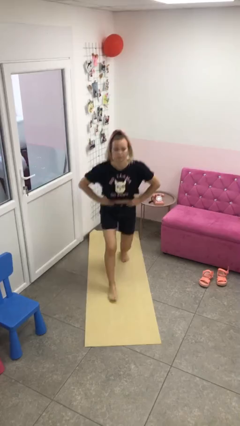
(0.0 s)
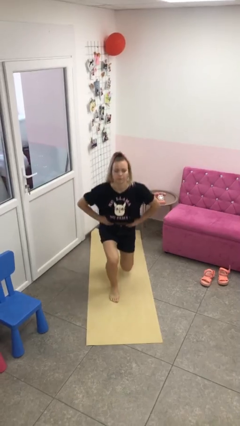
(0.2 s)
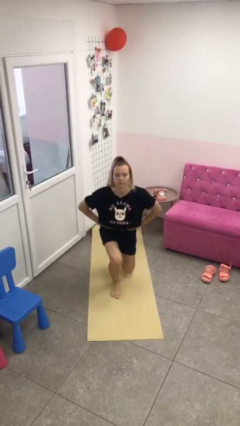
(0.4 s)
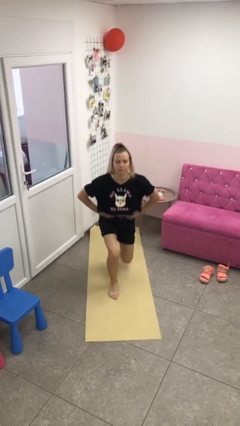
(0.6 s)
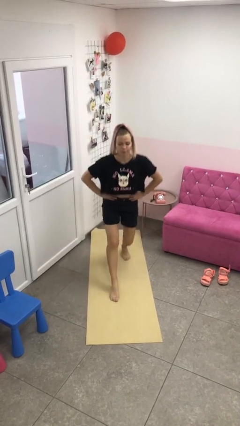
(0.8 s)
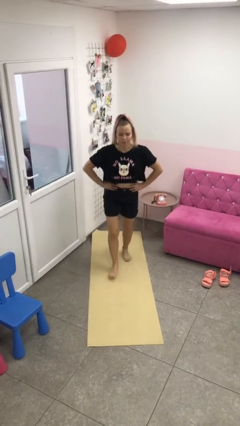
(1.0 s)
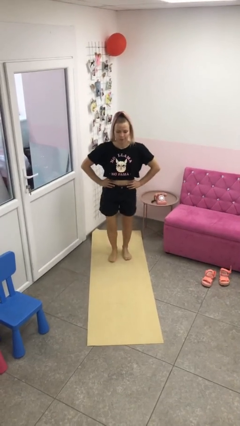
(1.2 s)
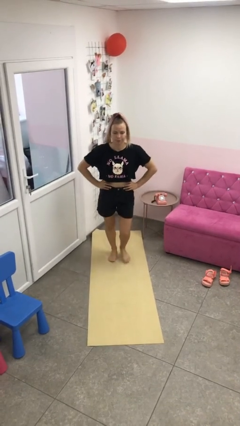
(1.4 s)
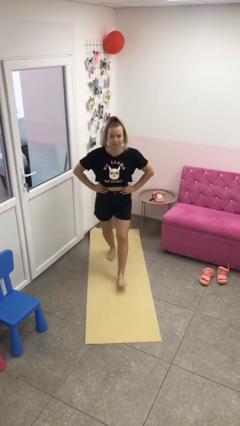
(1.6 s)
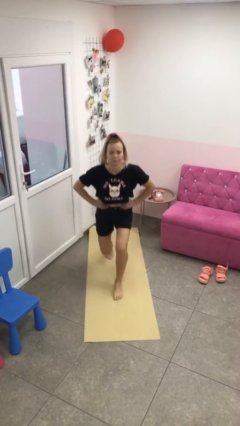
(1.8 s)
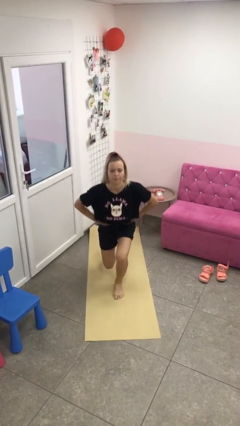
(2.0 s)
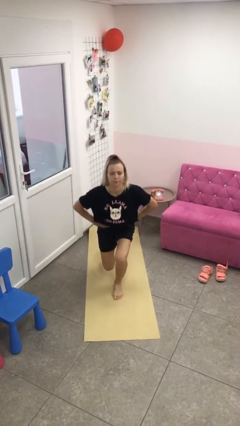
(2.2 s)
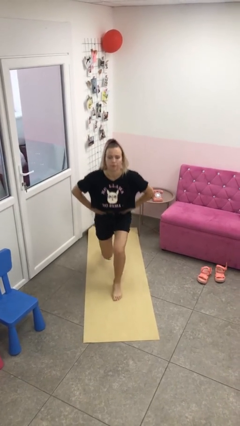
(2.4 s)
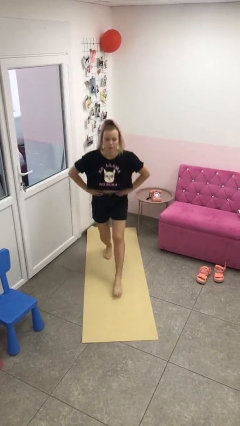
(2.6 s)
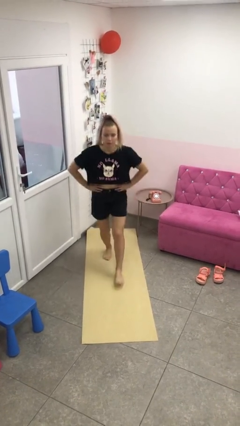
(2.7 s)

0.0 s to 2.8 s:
person exercises with lunges

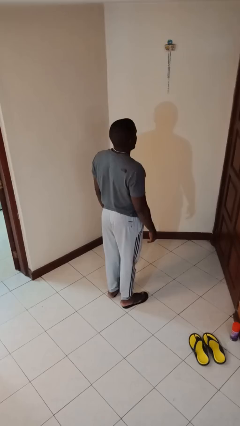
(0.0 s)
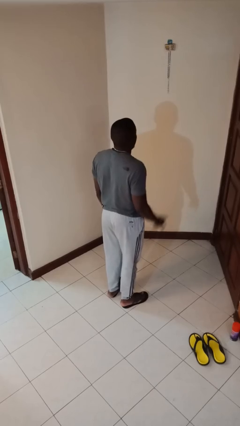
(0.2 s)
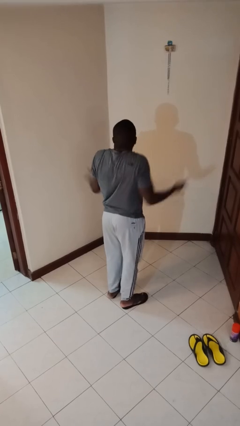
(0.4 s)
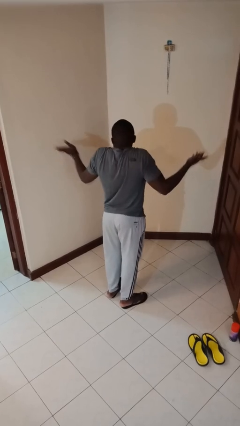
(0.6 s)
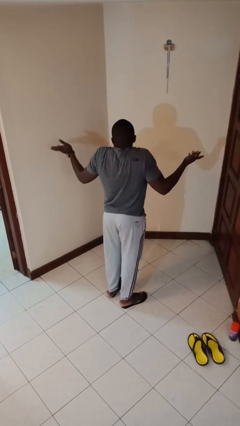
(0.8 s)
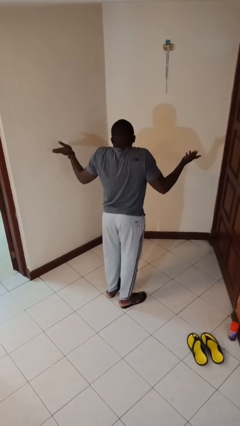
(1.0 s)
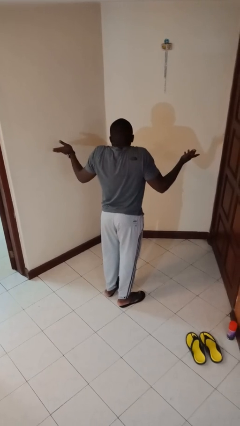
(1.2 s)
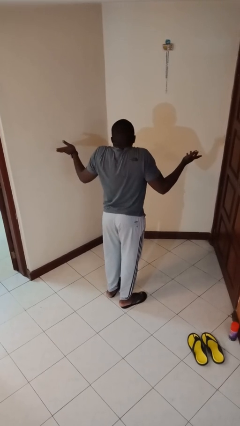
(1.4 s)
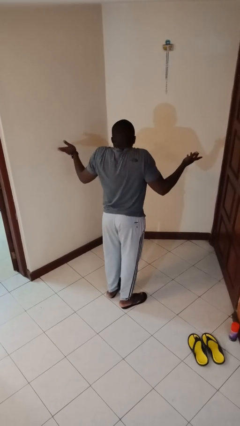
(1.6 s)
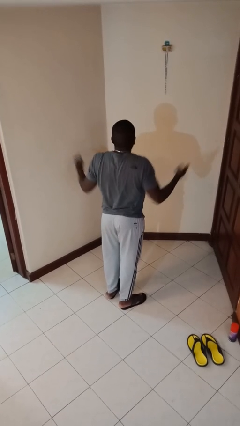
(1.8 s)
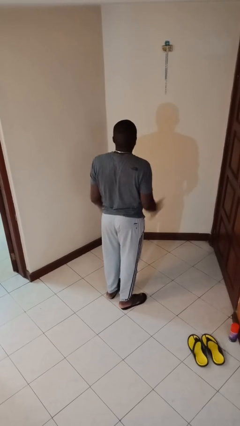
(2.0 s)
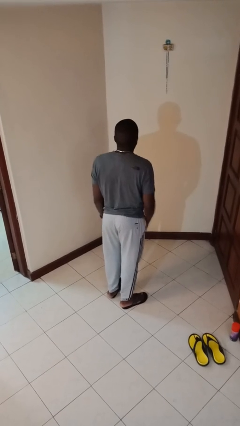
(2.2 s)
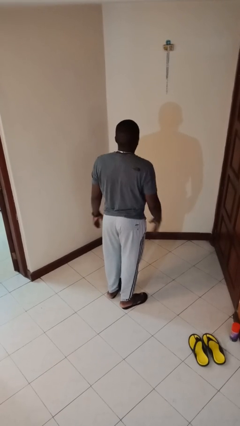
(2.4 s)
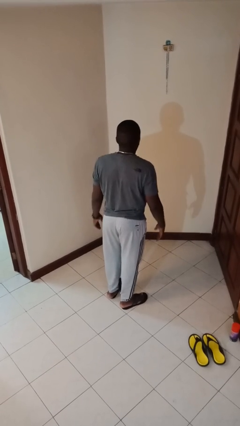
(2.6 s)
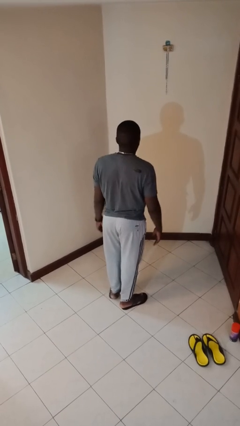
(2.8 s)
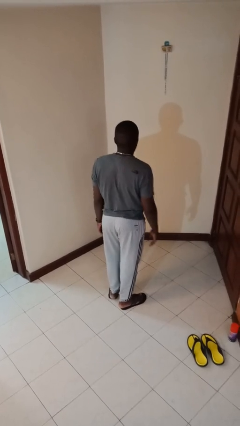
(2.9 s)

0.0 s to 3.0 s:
person shrugs

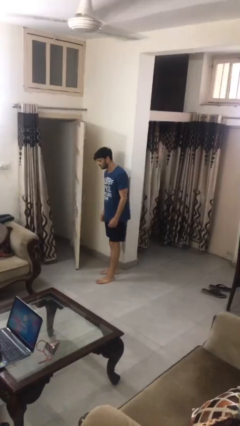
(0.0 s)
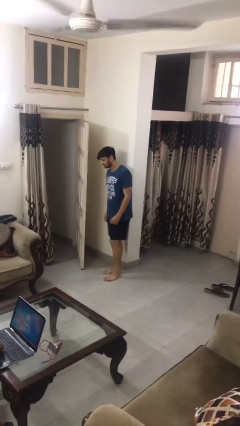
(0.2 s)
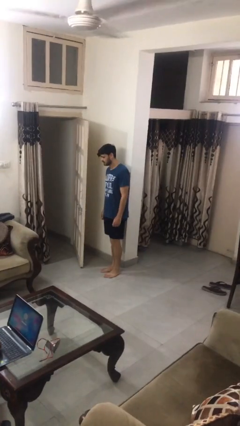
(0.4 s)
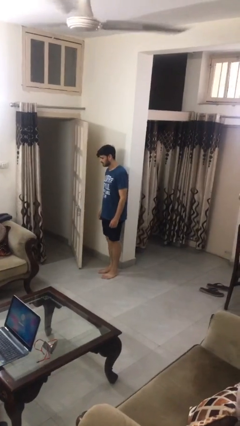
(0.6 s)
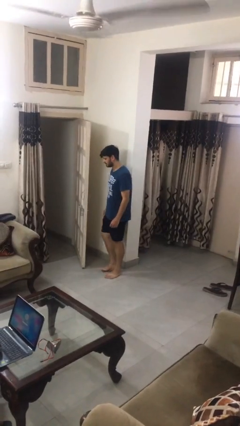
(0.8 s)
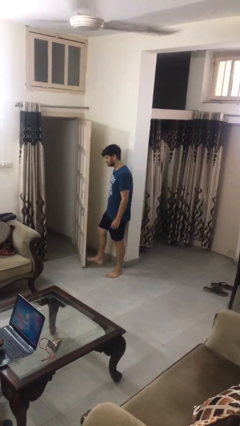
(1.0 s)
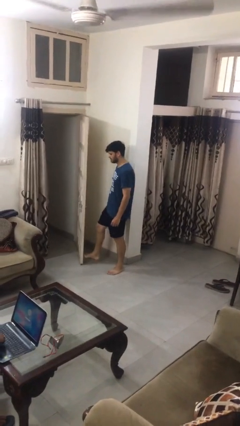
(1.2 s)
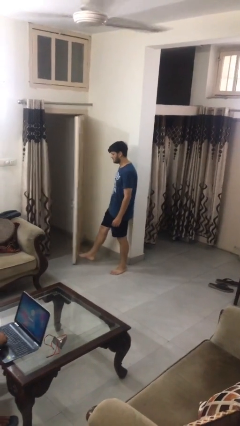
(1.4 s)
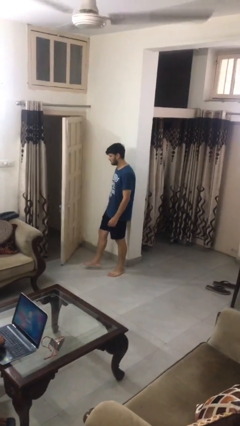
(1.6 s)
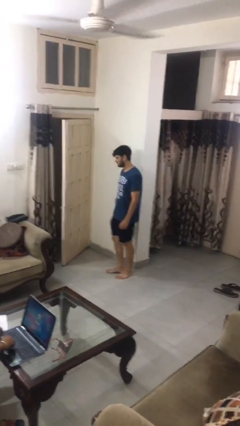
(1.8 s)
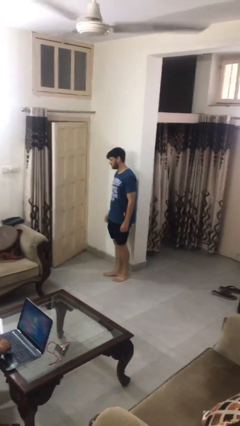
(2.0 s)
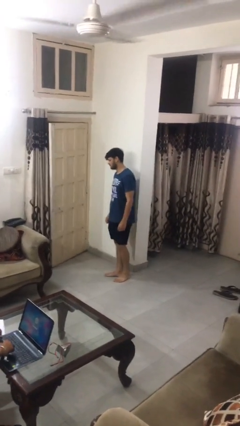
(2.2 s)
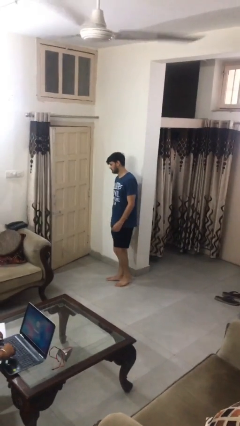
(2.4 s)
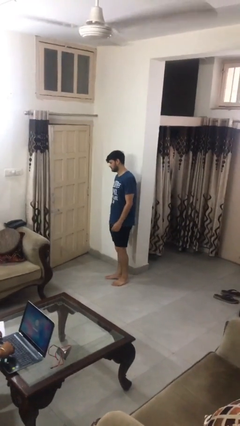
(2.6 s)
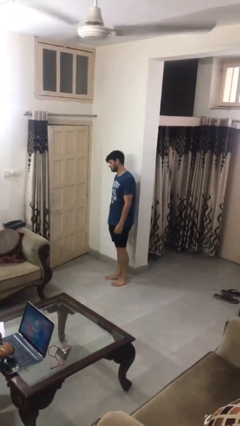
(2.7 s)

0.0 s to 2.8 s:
person closes door with foot

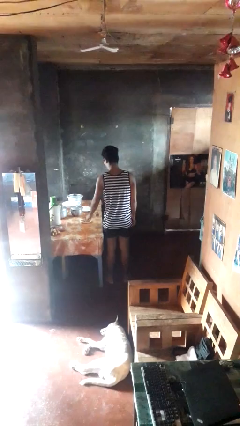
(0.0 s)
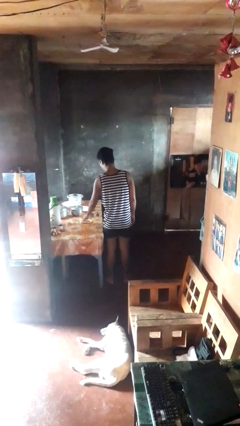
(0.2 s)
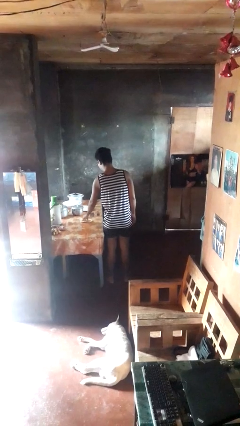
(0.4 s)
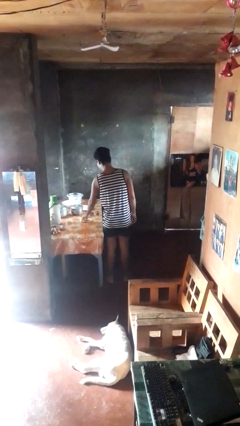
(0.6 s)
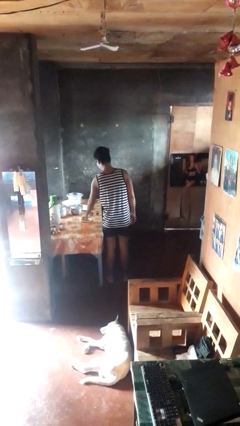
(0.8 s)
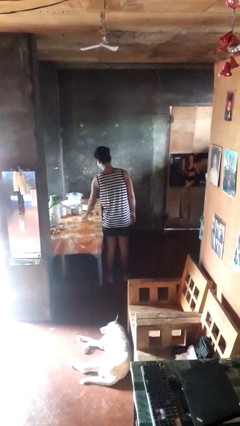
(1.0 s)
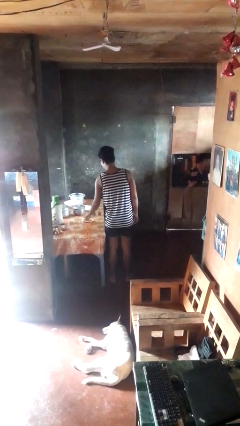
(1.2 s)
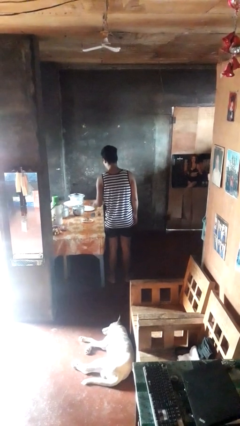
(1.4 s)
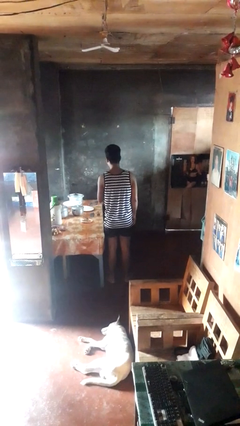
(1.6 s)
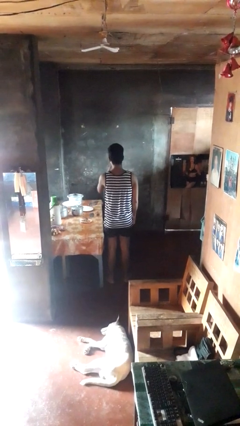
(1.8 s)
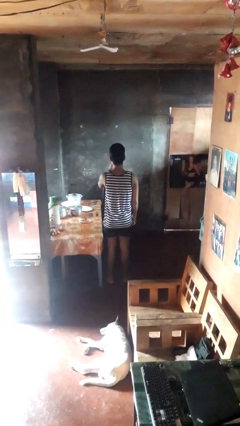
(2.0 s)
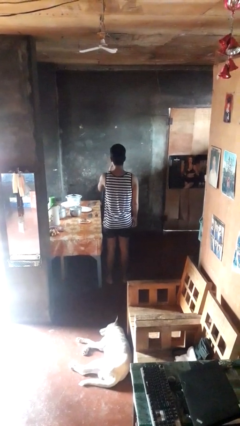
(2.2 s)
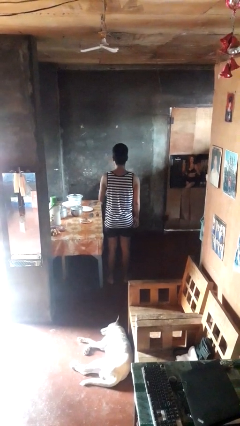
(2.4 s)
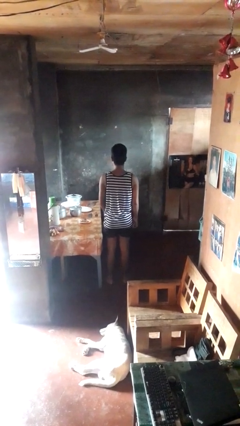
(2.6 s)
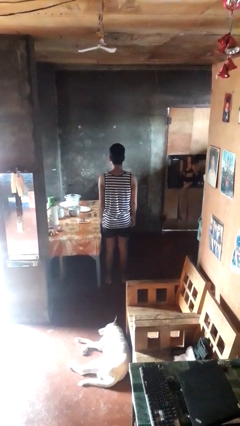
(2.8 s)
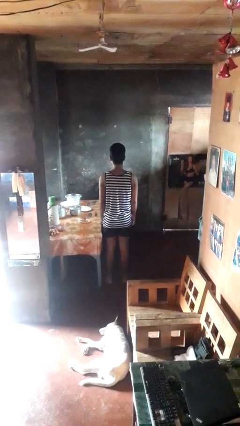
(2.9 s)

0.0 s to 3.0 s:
person eats with hands

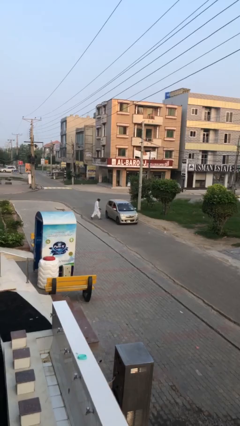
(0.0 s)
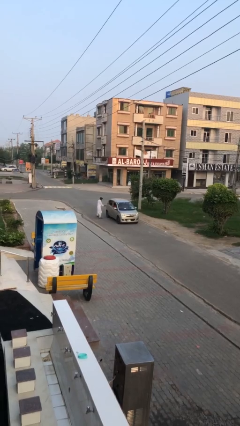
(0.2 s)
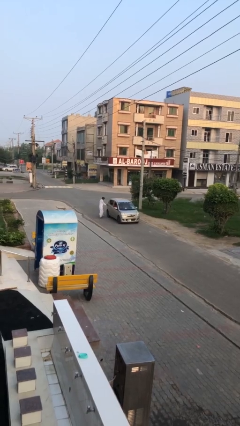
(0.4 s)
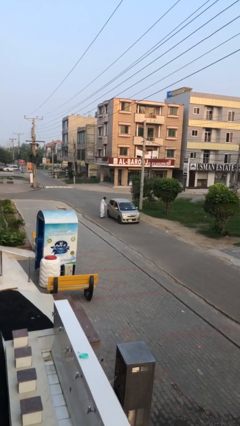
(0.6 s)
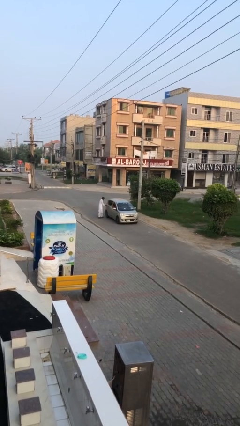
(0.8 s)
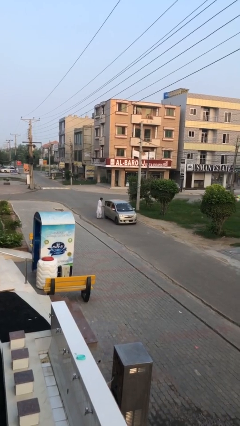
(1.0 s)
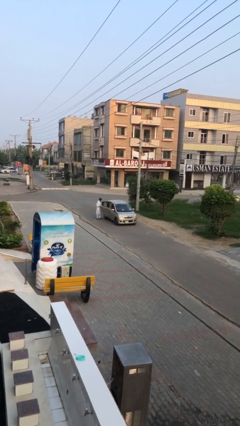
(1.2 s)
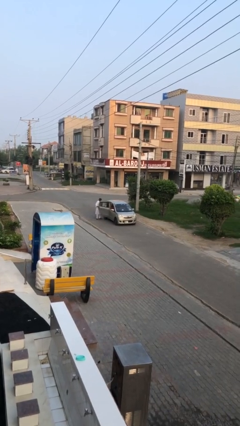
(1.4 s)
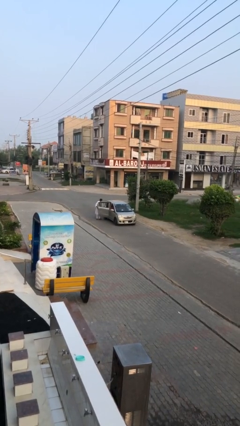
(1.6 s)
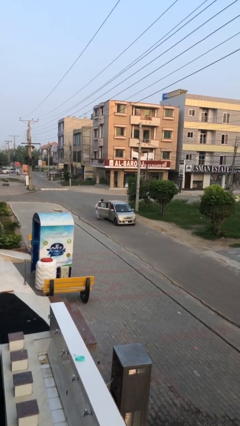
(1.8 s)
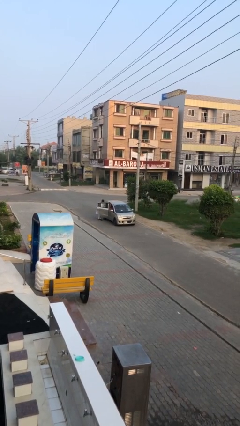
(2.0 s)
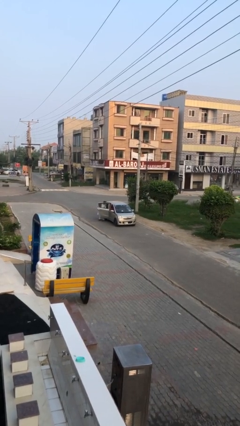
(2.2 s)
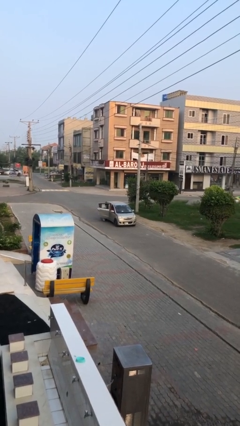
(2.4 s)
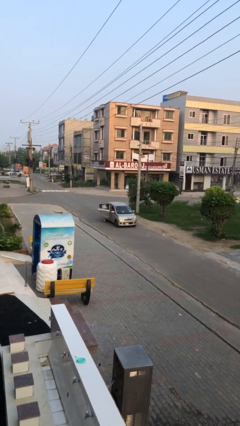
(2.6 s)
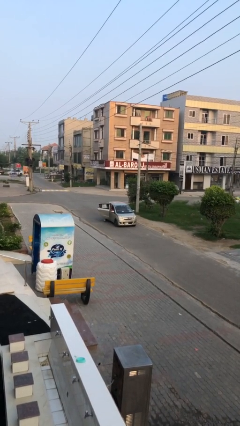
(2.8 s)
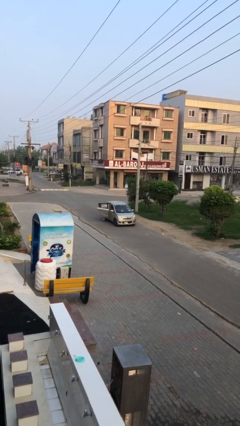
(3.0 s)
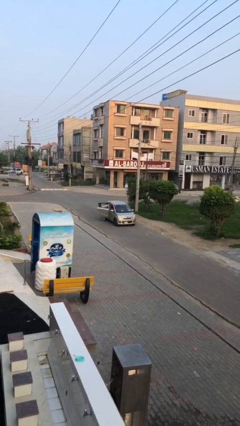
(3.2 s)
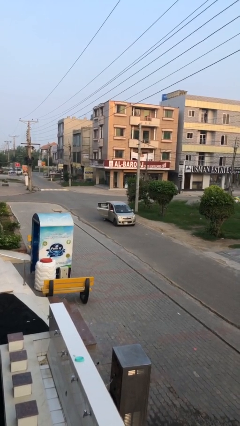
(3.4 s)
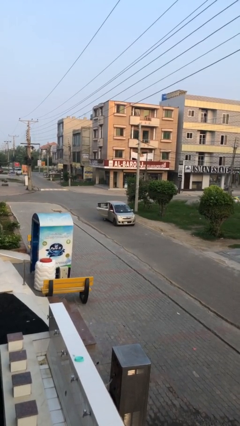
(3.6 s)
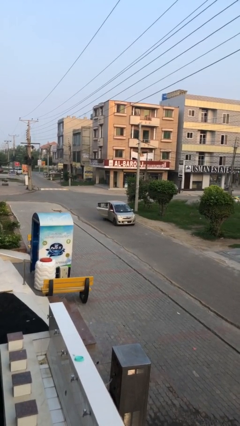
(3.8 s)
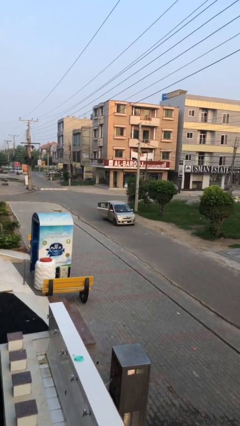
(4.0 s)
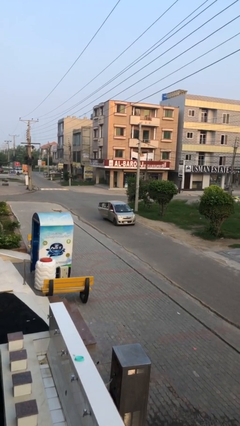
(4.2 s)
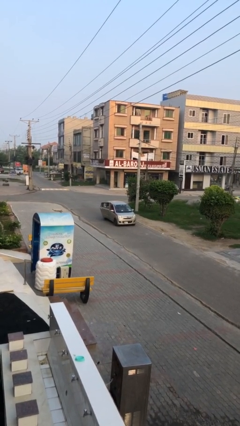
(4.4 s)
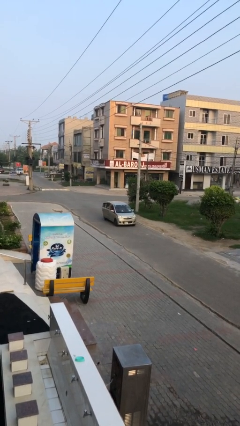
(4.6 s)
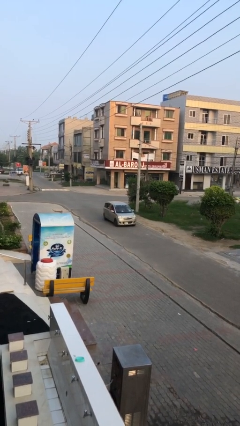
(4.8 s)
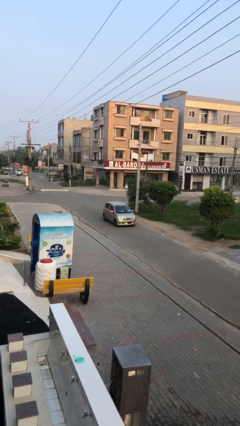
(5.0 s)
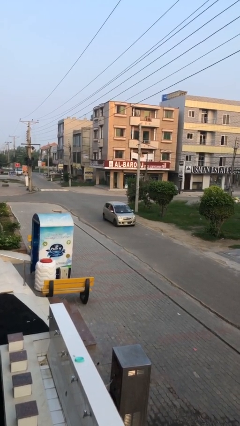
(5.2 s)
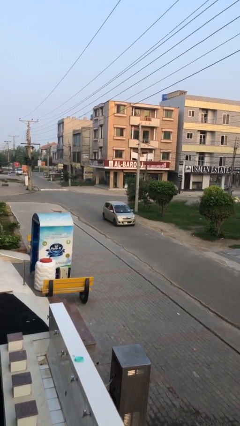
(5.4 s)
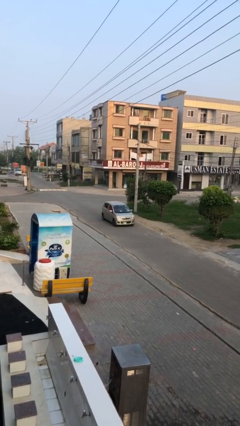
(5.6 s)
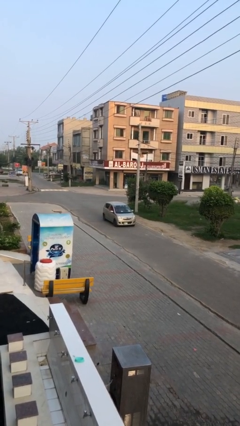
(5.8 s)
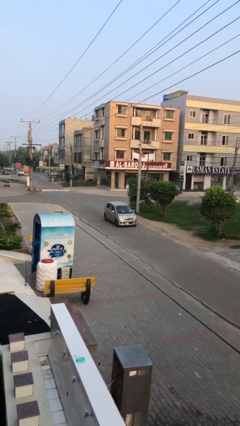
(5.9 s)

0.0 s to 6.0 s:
car picks up person
